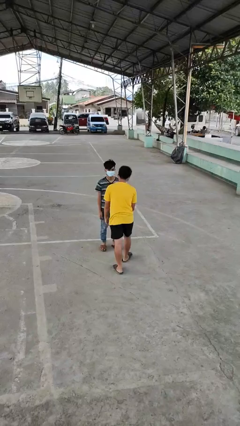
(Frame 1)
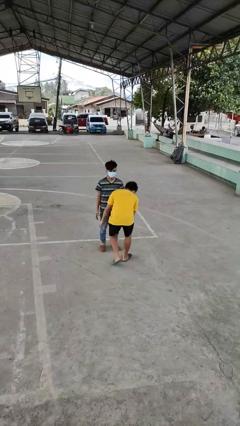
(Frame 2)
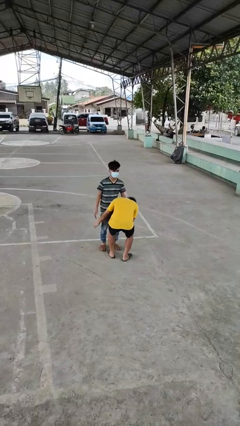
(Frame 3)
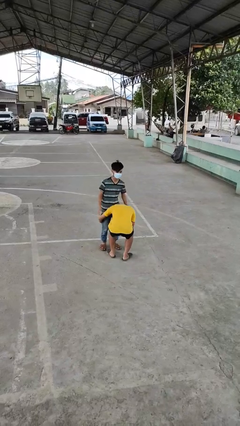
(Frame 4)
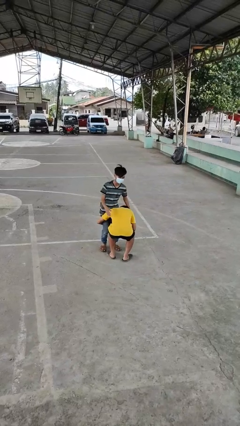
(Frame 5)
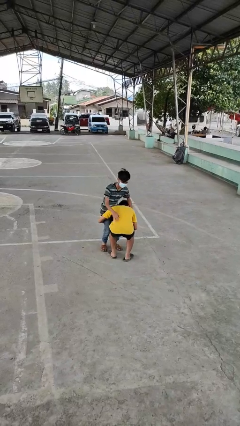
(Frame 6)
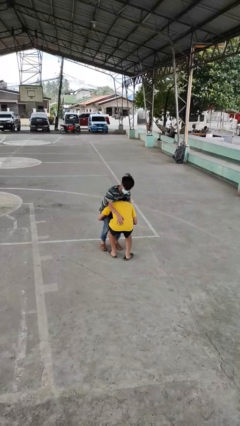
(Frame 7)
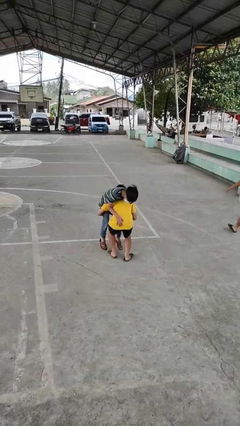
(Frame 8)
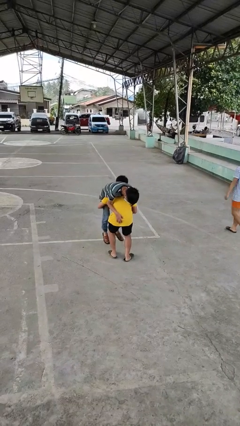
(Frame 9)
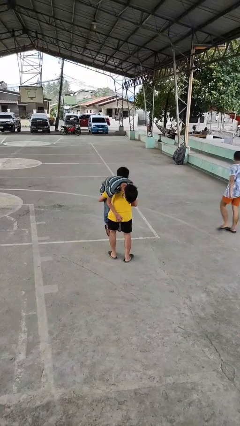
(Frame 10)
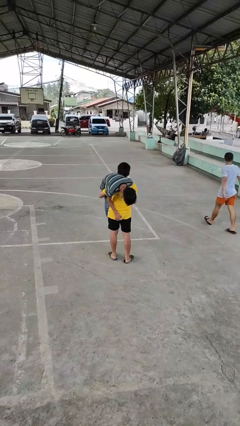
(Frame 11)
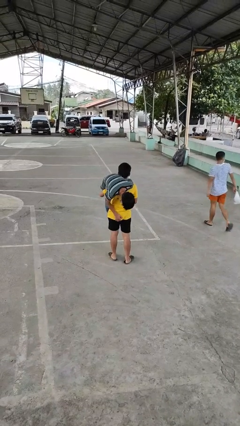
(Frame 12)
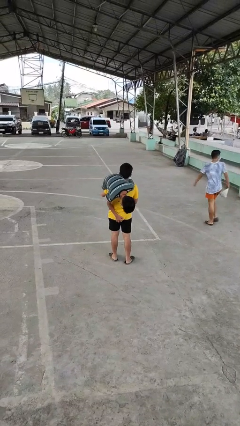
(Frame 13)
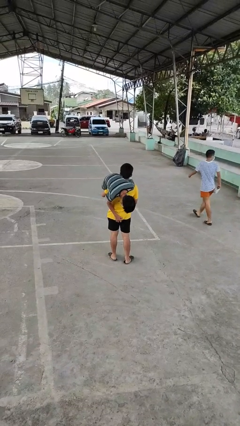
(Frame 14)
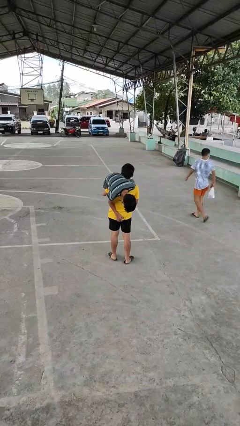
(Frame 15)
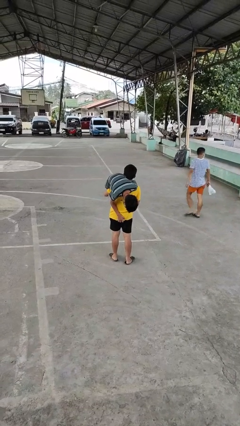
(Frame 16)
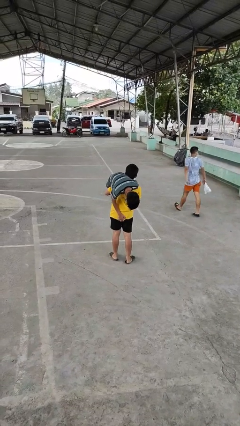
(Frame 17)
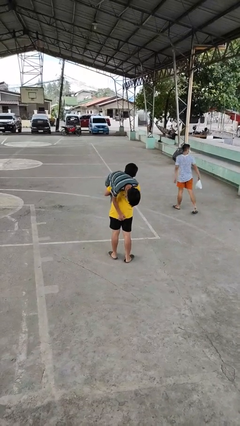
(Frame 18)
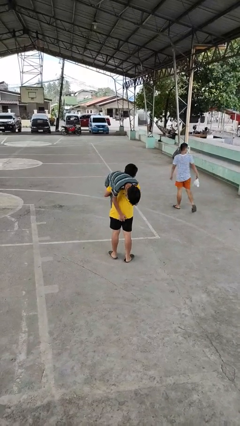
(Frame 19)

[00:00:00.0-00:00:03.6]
person carries person over shoulder

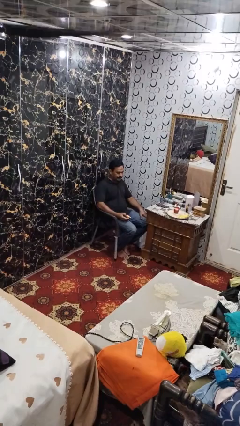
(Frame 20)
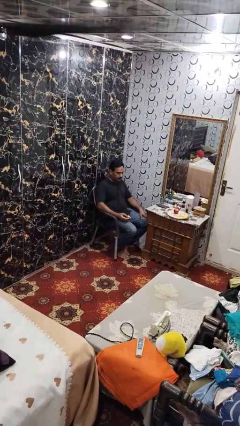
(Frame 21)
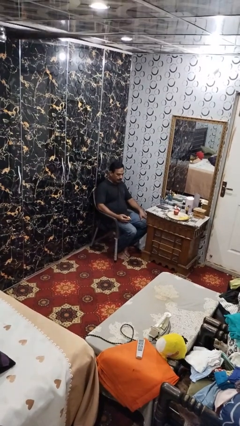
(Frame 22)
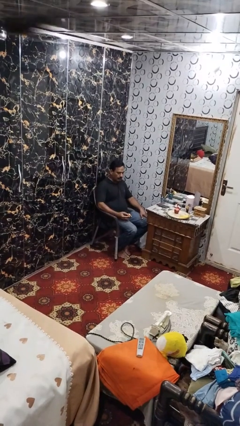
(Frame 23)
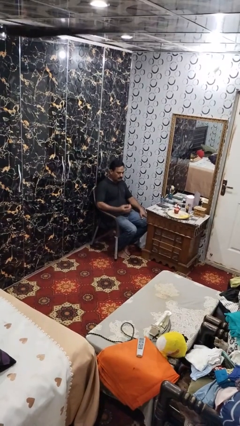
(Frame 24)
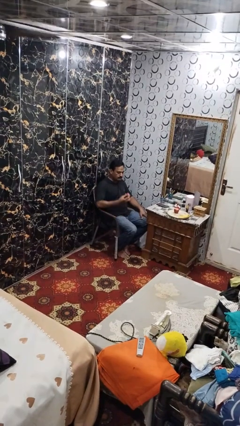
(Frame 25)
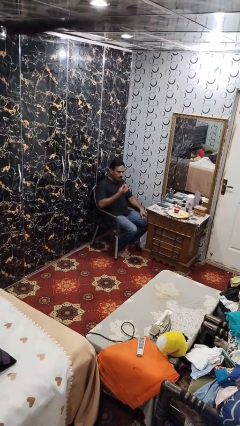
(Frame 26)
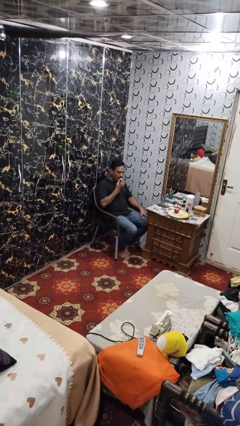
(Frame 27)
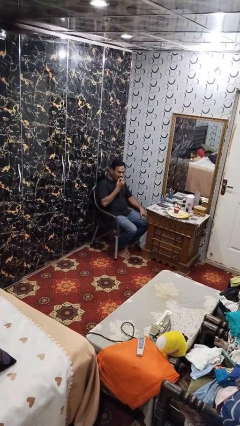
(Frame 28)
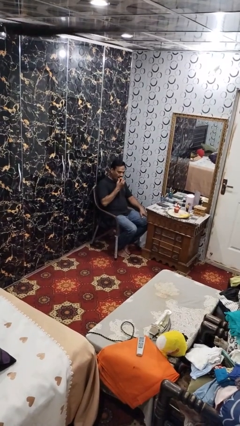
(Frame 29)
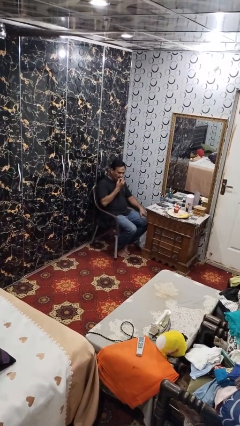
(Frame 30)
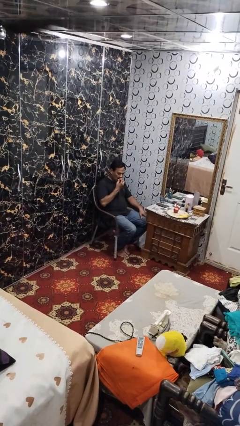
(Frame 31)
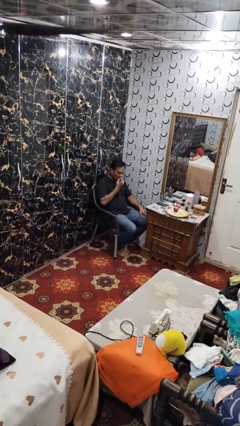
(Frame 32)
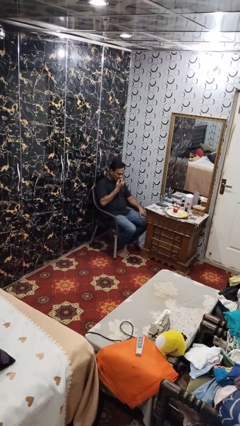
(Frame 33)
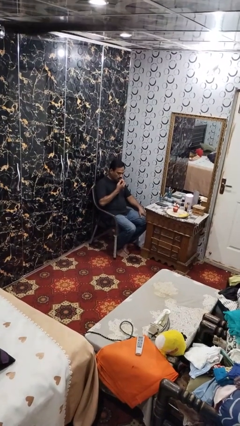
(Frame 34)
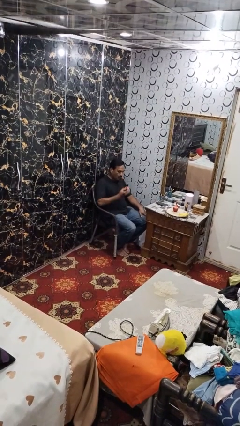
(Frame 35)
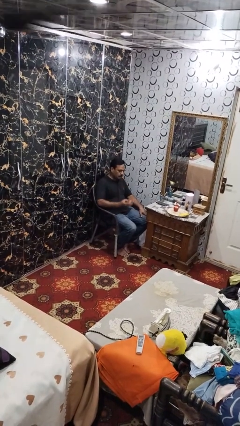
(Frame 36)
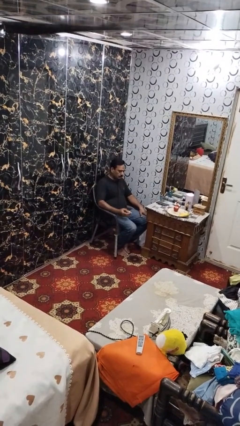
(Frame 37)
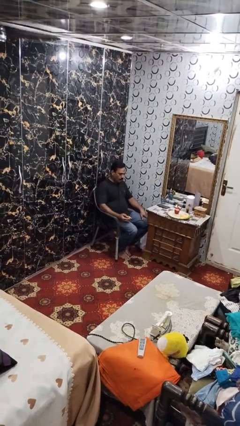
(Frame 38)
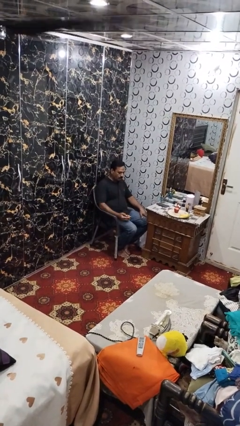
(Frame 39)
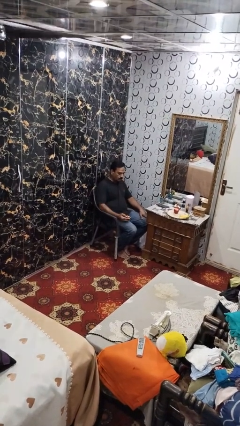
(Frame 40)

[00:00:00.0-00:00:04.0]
person eats apple

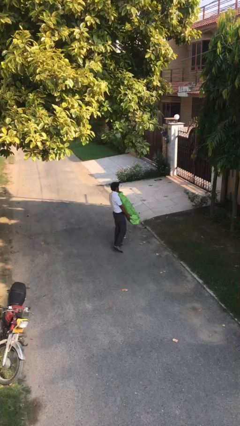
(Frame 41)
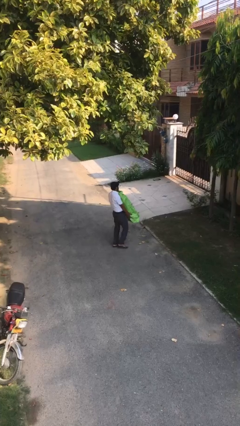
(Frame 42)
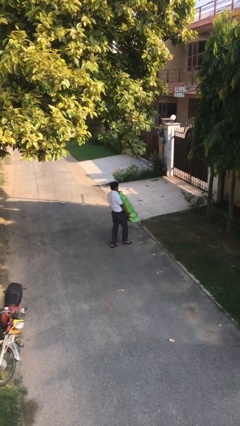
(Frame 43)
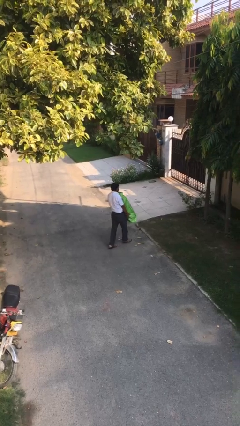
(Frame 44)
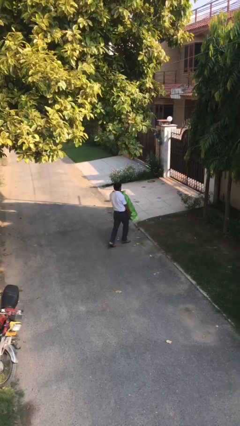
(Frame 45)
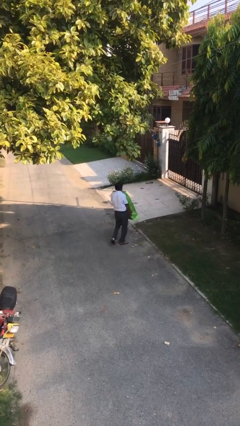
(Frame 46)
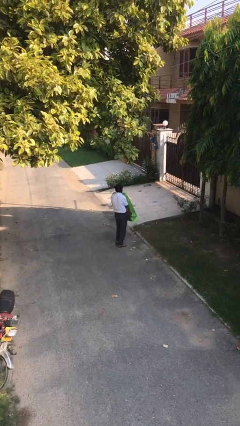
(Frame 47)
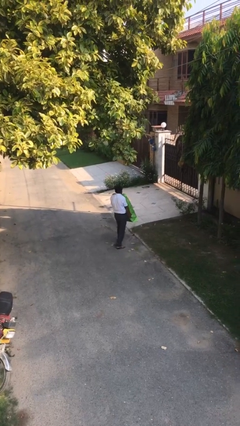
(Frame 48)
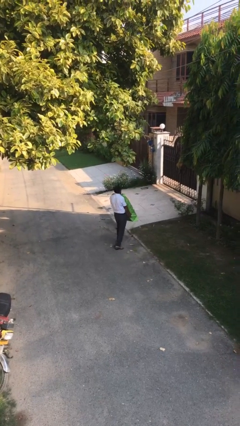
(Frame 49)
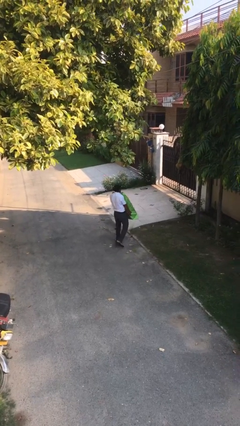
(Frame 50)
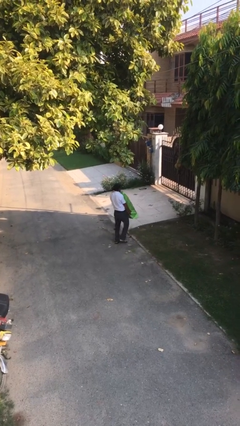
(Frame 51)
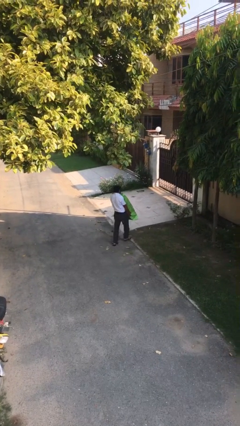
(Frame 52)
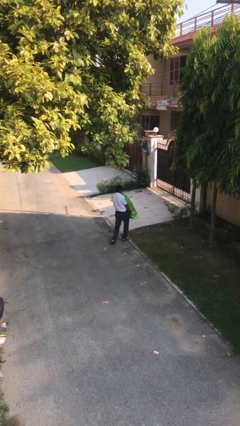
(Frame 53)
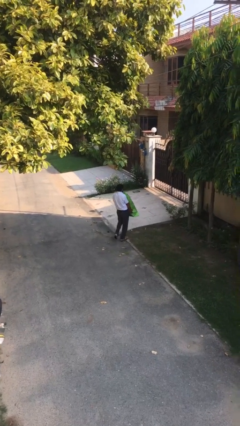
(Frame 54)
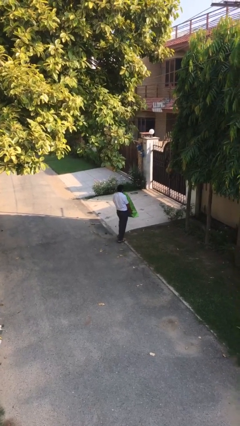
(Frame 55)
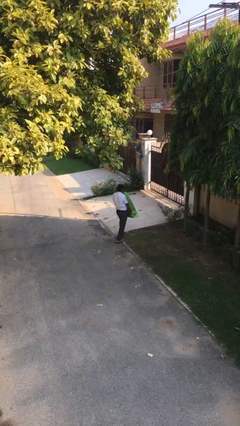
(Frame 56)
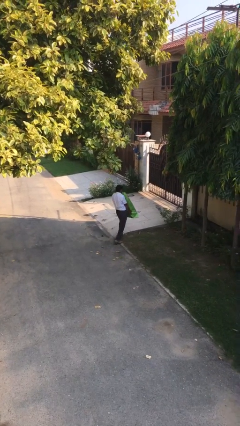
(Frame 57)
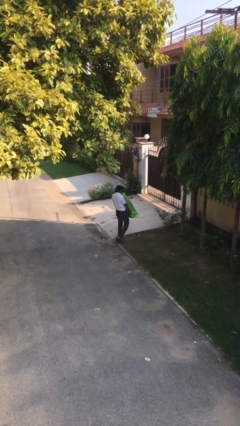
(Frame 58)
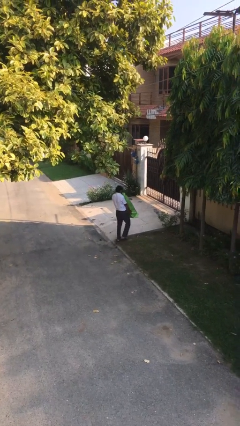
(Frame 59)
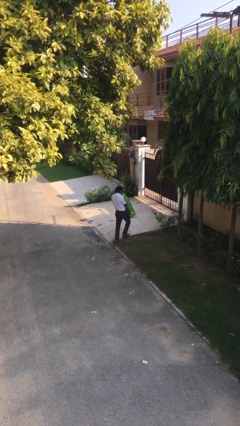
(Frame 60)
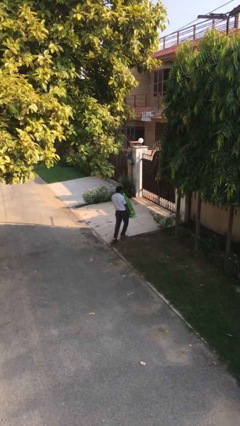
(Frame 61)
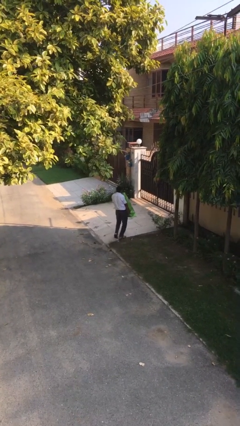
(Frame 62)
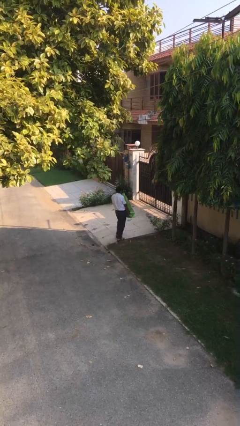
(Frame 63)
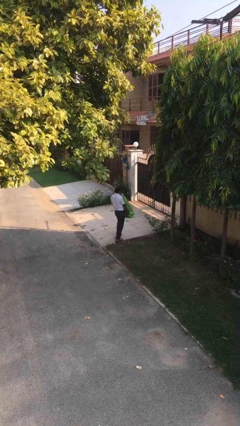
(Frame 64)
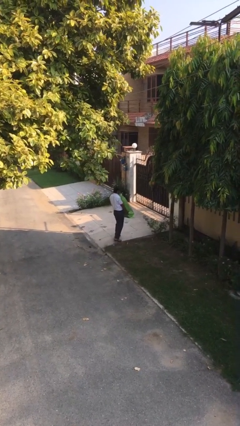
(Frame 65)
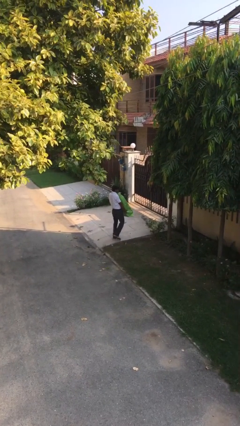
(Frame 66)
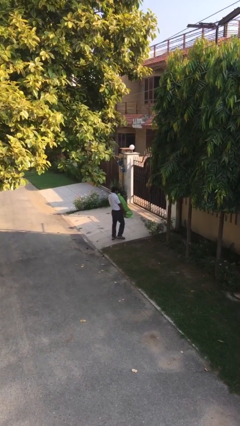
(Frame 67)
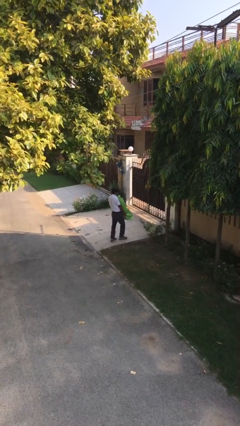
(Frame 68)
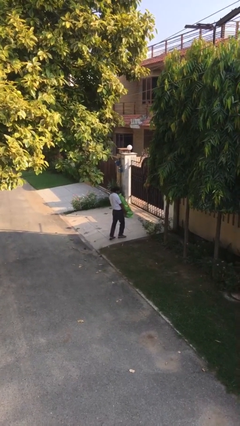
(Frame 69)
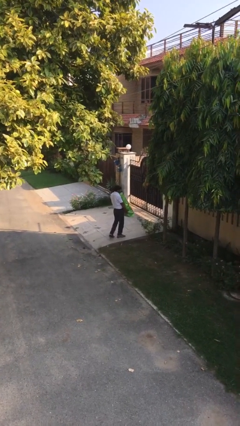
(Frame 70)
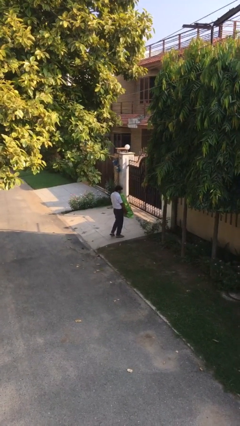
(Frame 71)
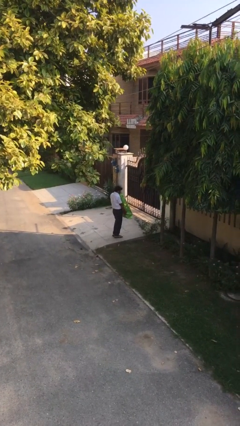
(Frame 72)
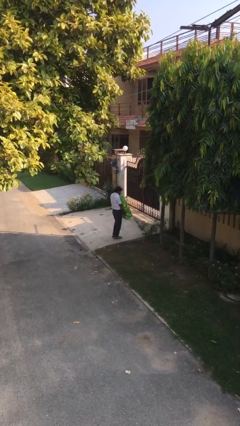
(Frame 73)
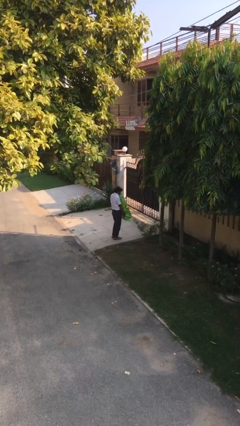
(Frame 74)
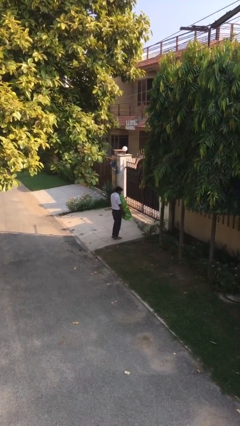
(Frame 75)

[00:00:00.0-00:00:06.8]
person carries heavy object

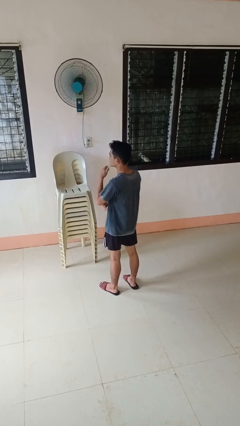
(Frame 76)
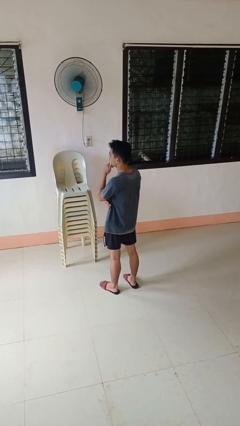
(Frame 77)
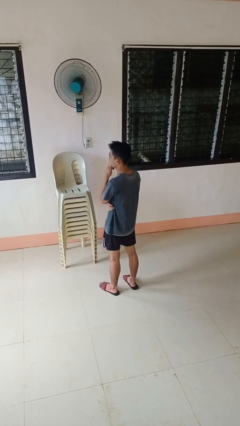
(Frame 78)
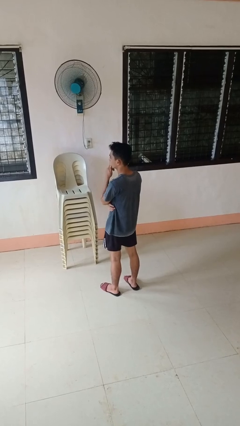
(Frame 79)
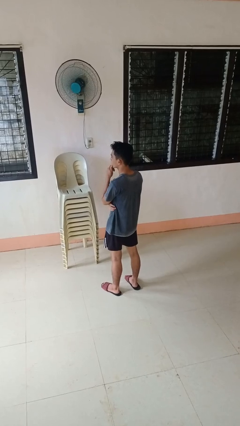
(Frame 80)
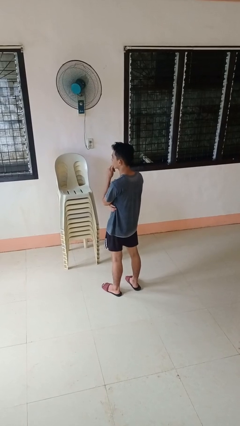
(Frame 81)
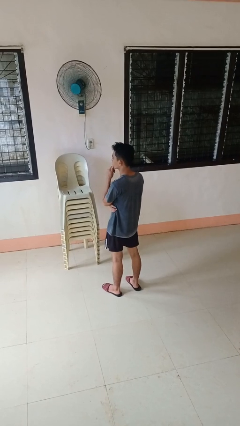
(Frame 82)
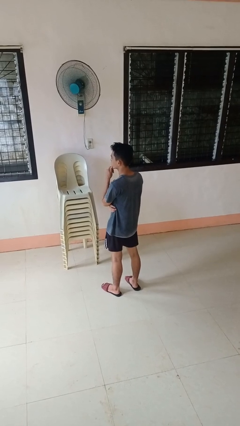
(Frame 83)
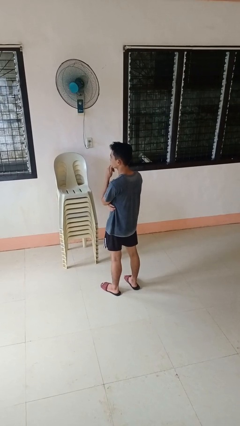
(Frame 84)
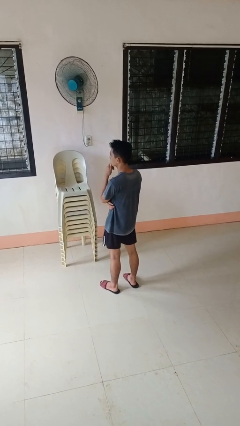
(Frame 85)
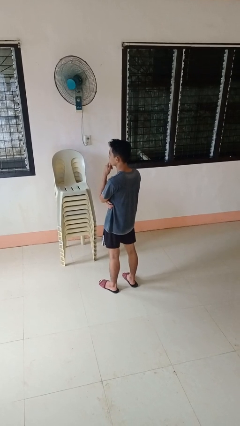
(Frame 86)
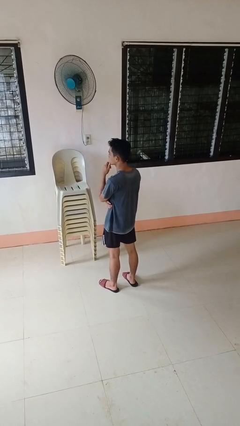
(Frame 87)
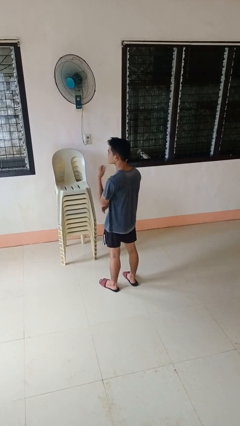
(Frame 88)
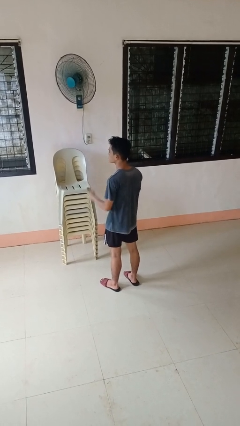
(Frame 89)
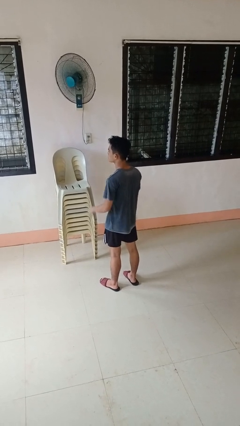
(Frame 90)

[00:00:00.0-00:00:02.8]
person strokes chin

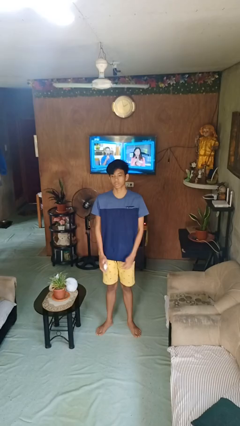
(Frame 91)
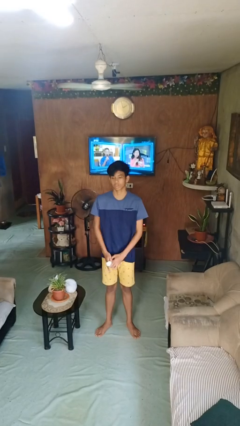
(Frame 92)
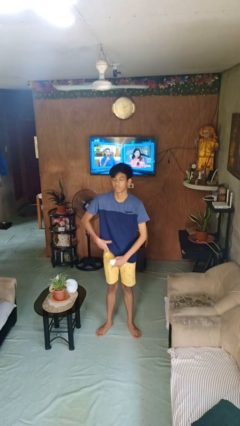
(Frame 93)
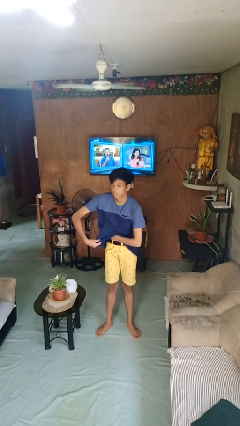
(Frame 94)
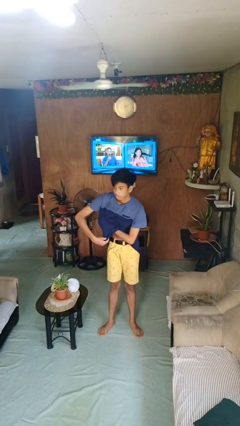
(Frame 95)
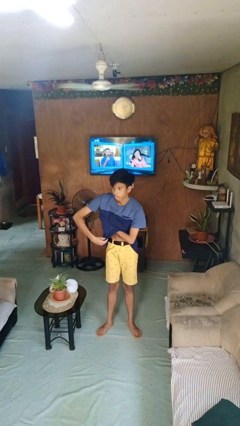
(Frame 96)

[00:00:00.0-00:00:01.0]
person applies deodorant
